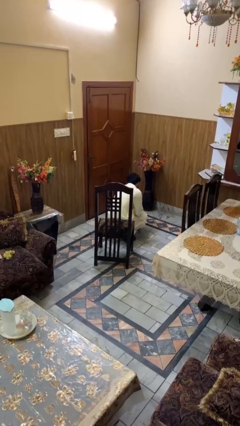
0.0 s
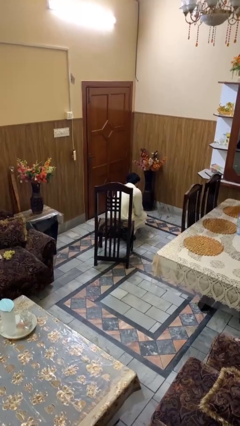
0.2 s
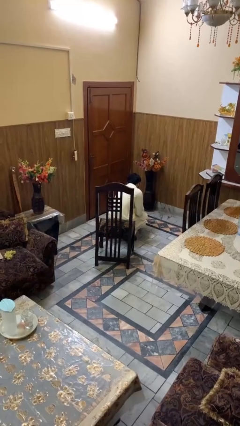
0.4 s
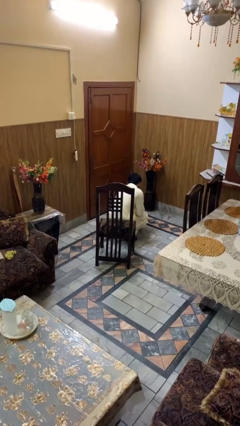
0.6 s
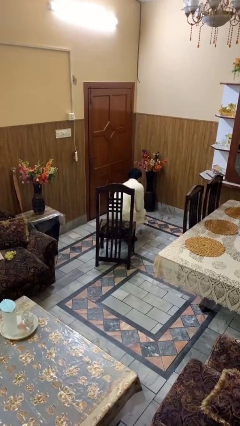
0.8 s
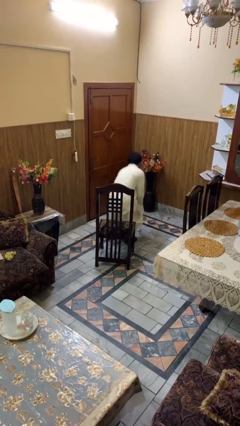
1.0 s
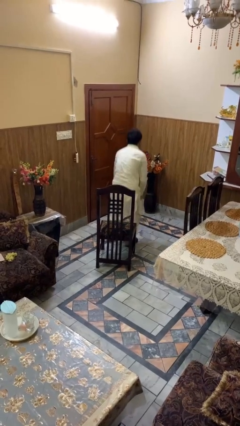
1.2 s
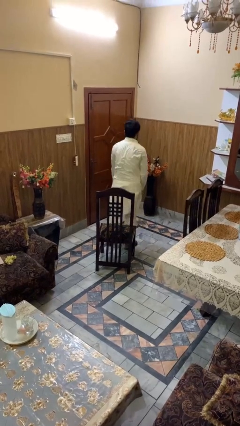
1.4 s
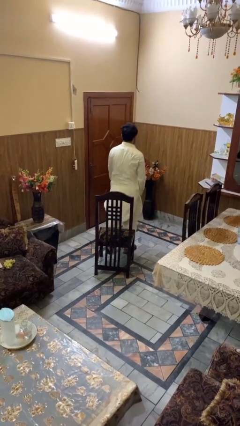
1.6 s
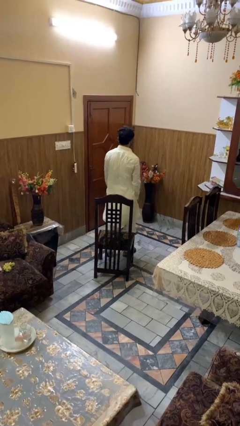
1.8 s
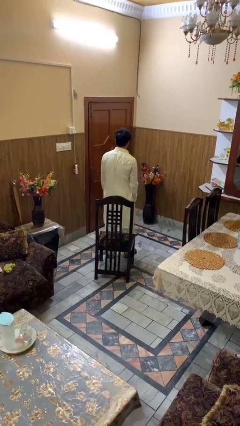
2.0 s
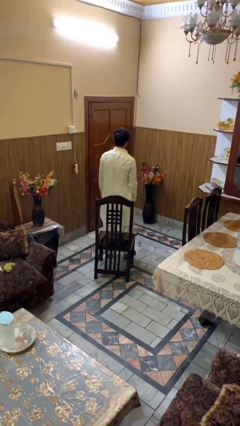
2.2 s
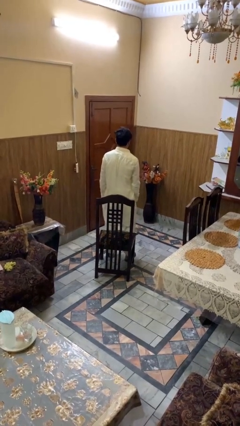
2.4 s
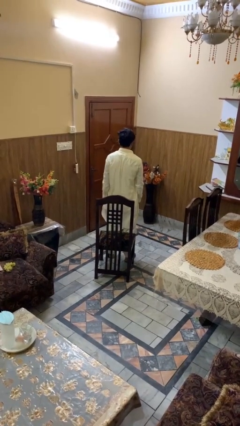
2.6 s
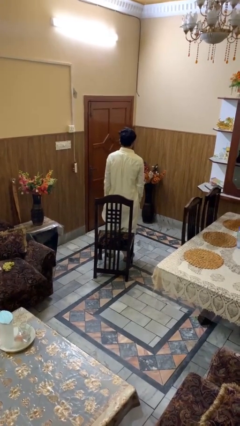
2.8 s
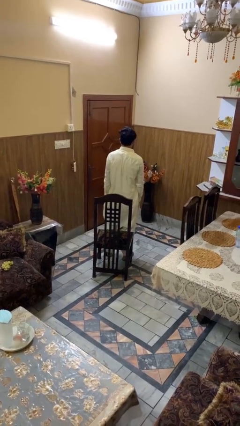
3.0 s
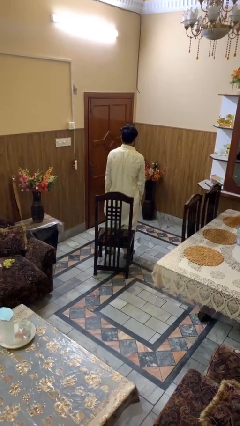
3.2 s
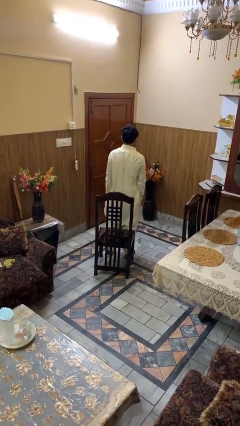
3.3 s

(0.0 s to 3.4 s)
person stands up from floor

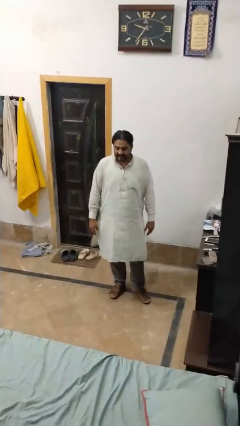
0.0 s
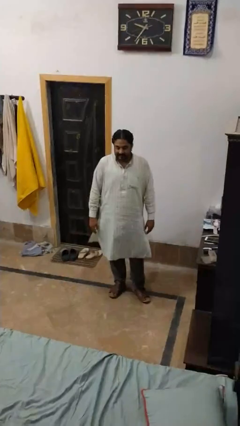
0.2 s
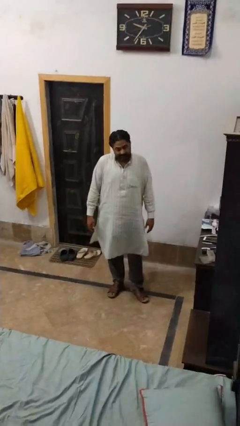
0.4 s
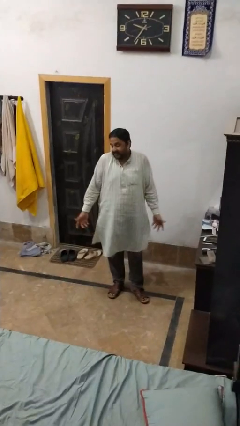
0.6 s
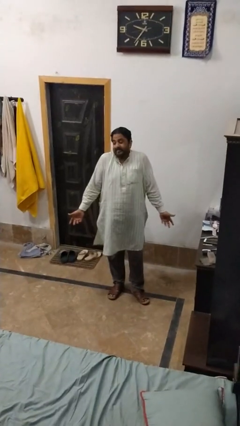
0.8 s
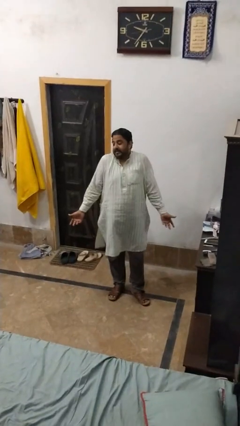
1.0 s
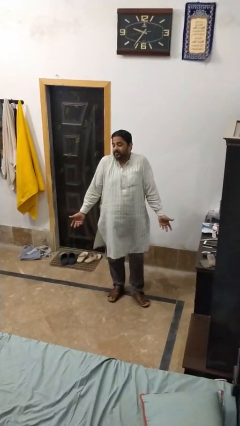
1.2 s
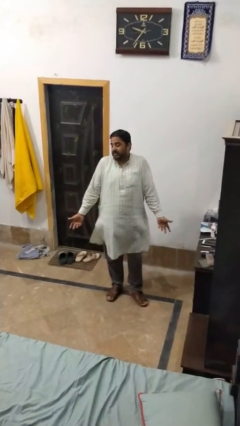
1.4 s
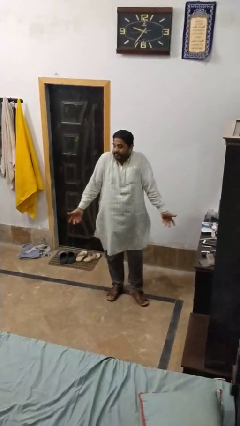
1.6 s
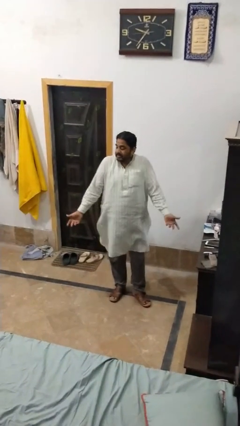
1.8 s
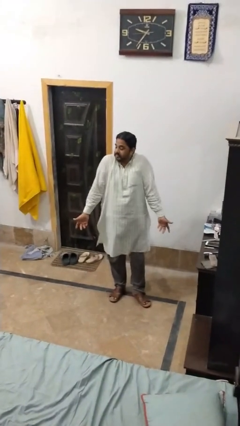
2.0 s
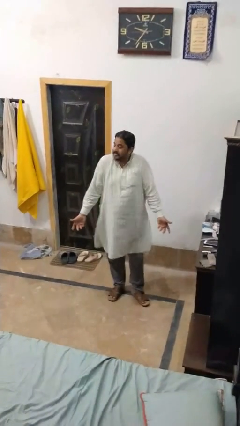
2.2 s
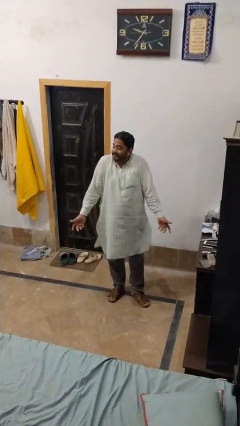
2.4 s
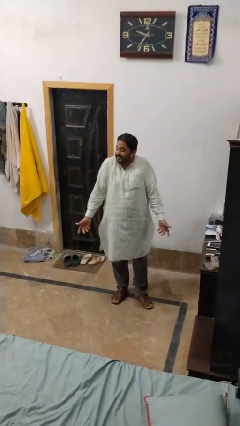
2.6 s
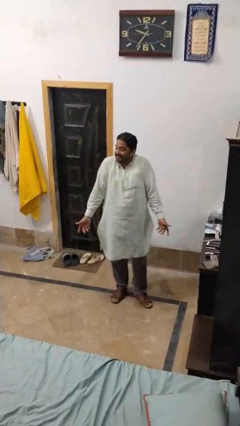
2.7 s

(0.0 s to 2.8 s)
person shrugs

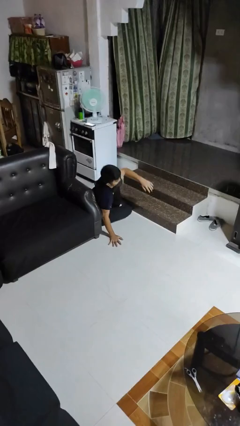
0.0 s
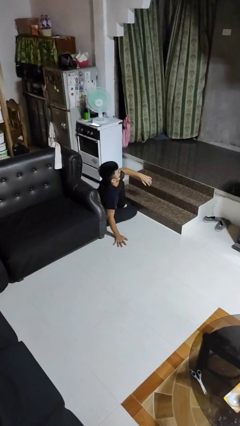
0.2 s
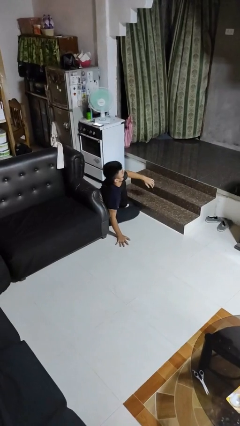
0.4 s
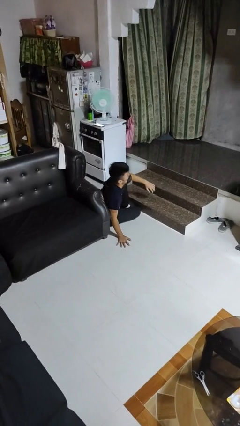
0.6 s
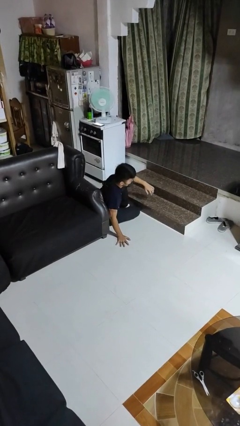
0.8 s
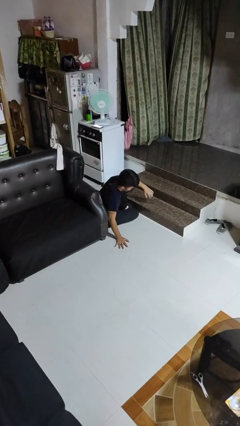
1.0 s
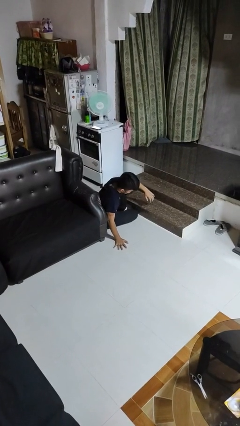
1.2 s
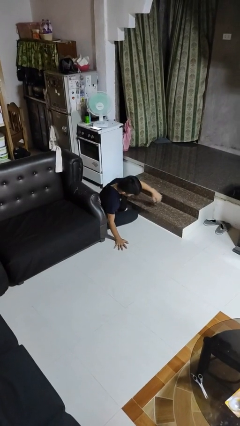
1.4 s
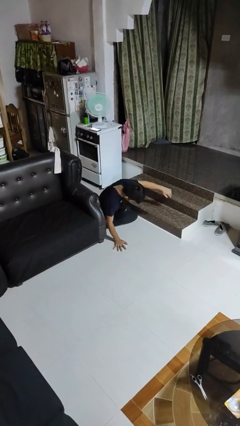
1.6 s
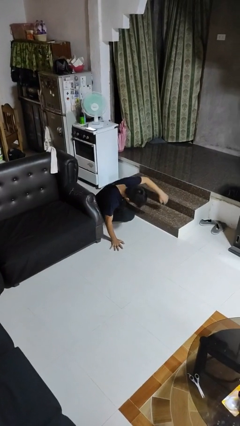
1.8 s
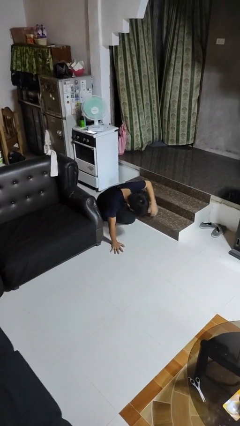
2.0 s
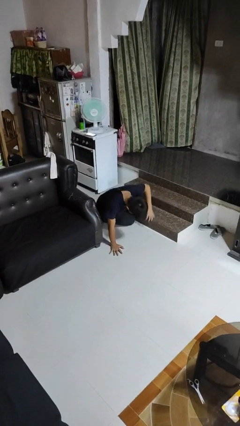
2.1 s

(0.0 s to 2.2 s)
person lies down on floor

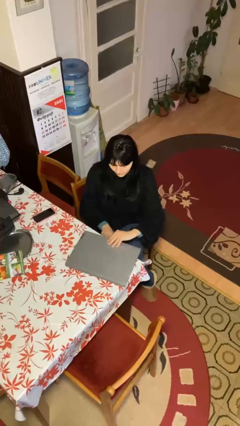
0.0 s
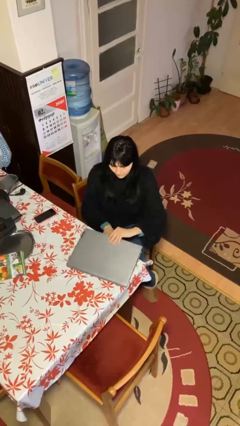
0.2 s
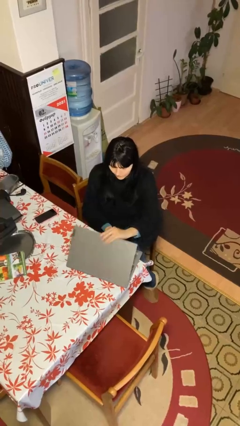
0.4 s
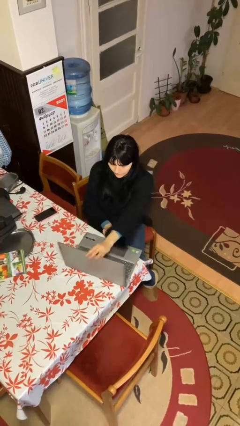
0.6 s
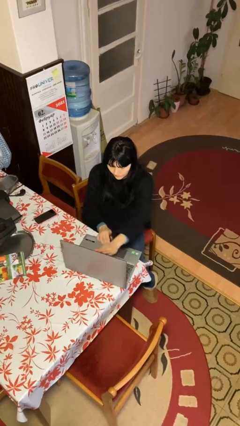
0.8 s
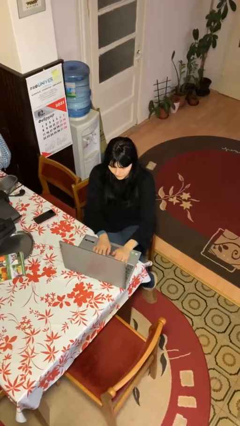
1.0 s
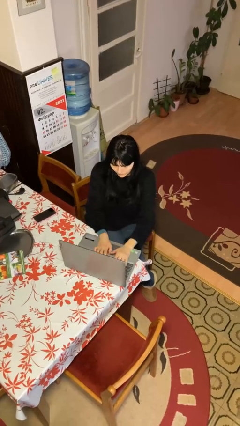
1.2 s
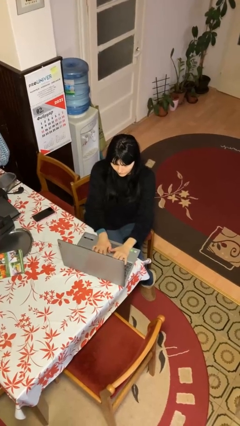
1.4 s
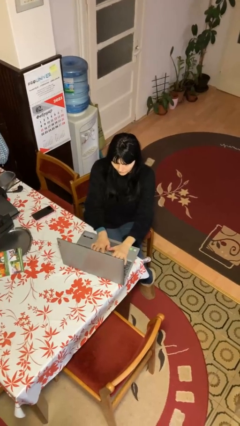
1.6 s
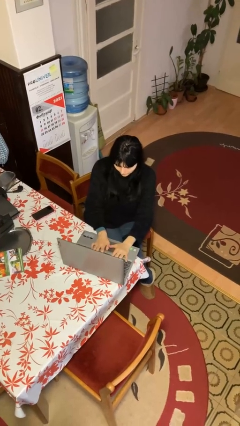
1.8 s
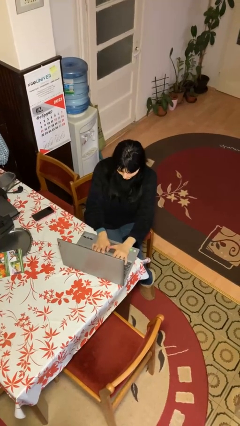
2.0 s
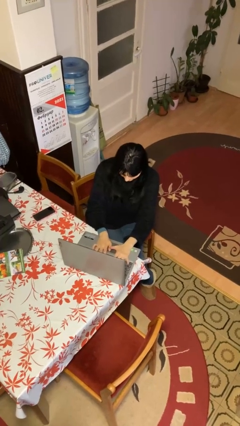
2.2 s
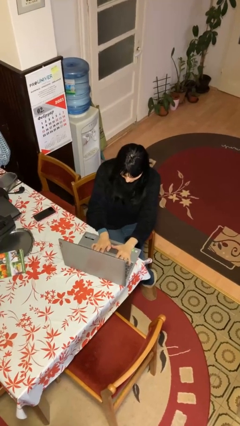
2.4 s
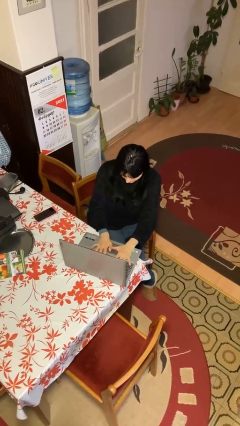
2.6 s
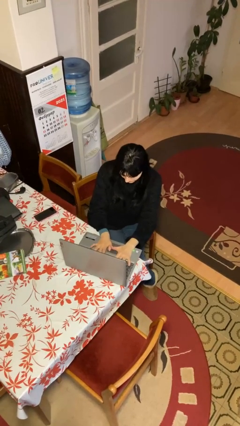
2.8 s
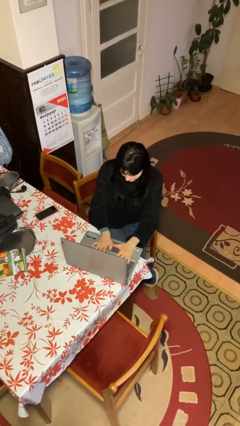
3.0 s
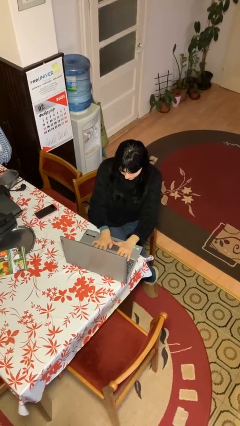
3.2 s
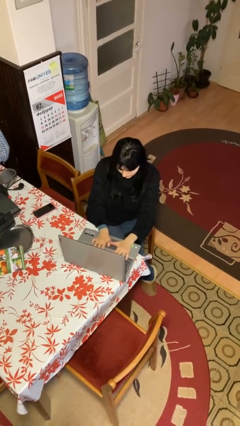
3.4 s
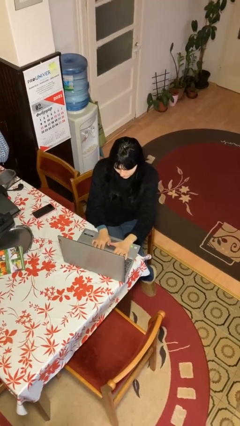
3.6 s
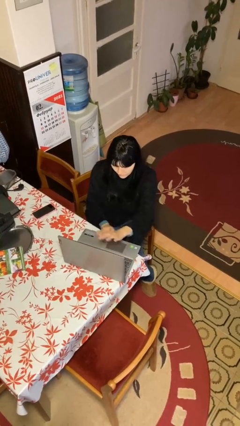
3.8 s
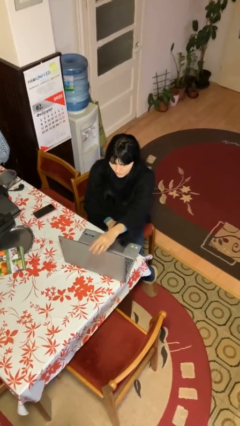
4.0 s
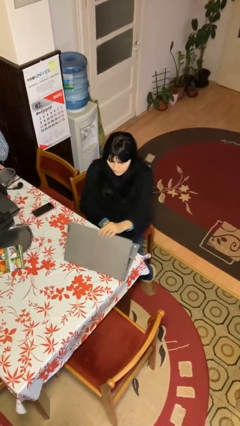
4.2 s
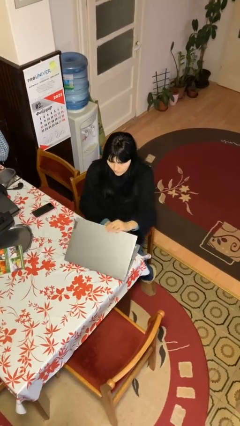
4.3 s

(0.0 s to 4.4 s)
person interacts with laptop

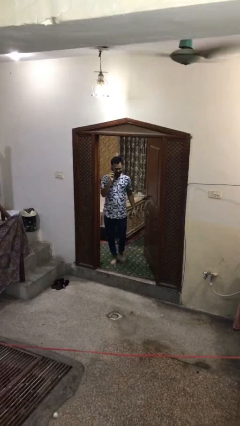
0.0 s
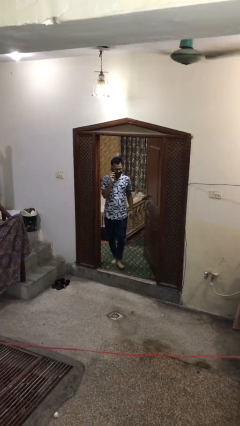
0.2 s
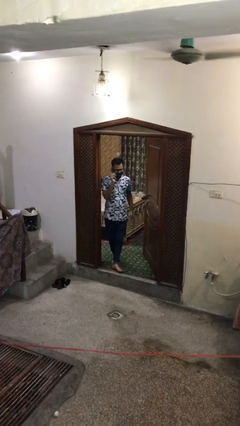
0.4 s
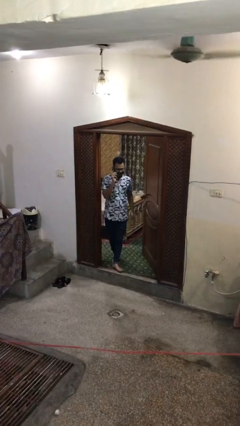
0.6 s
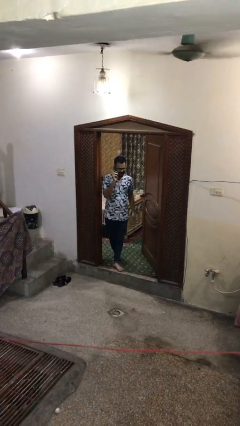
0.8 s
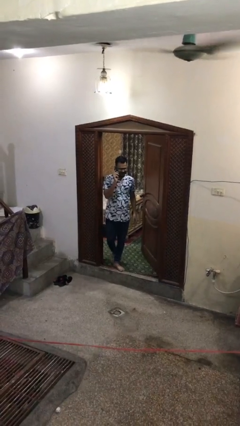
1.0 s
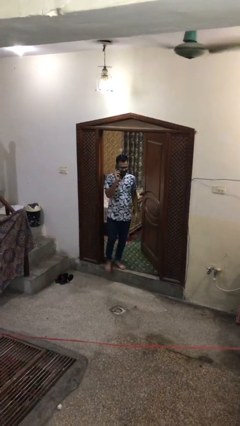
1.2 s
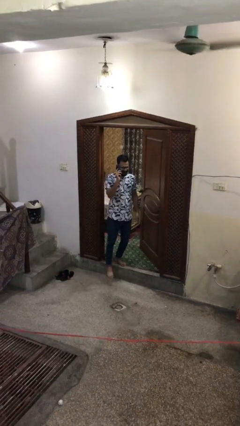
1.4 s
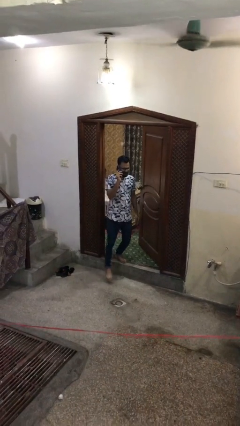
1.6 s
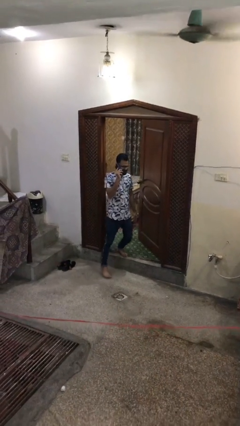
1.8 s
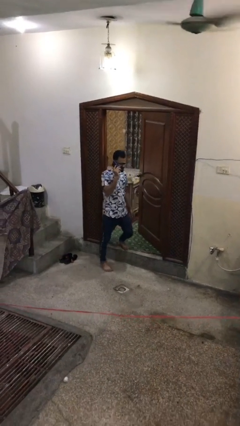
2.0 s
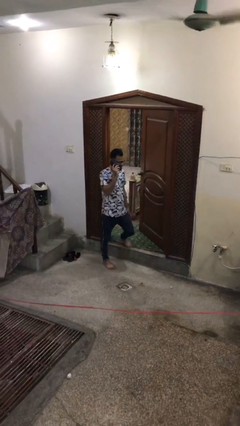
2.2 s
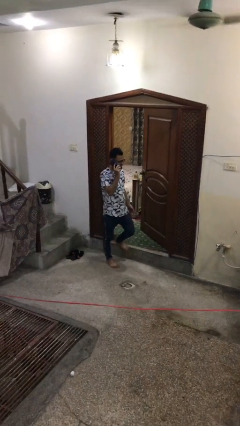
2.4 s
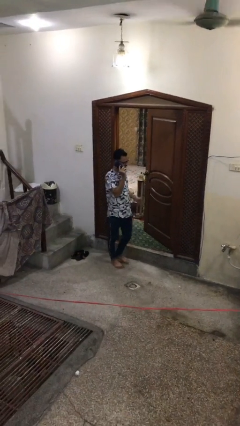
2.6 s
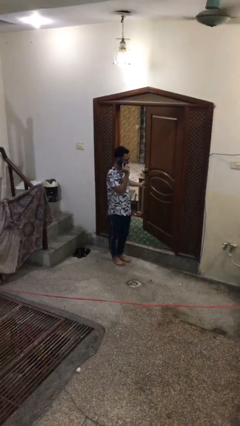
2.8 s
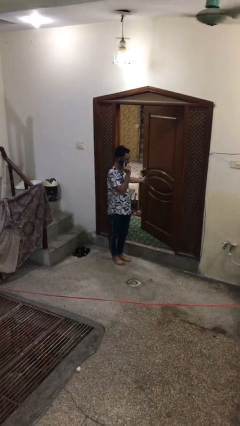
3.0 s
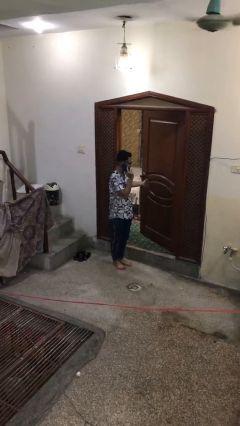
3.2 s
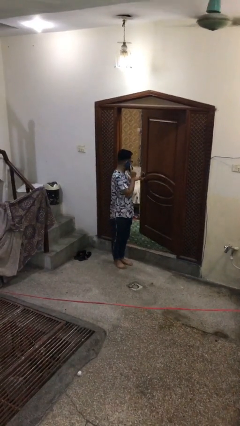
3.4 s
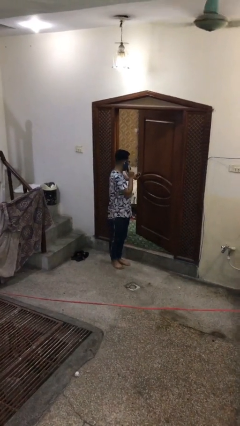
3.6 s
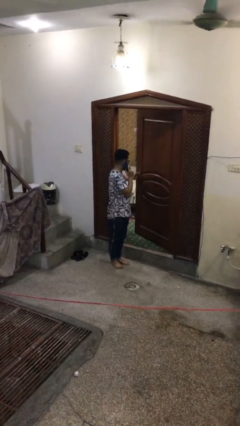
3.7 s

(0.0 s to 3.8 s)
person enters scene through structure

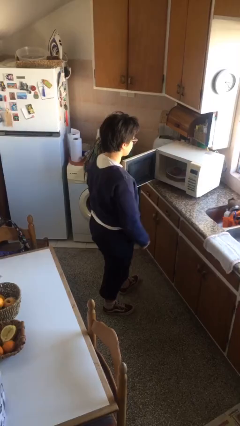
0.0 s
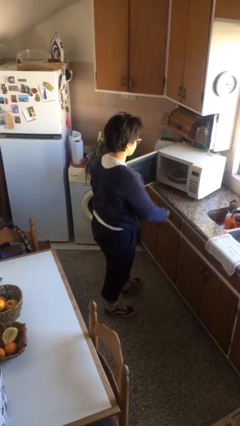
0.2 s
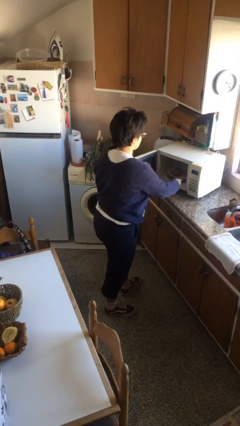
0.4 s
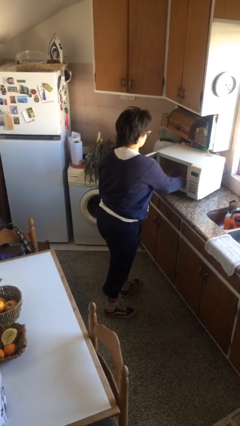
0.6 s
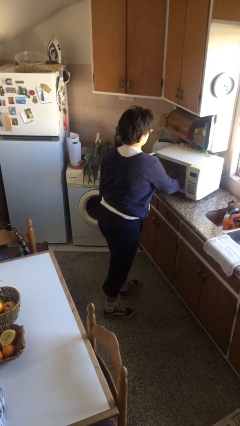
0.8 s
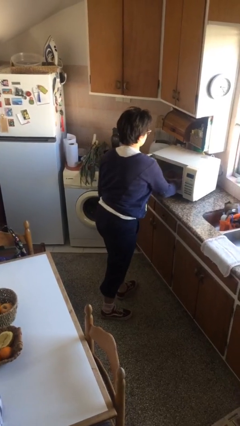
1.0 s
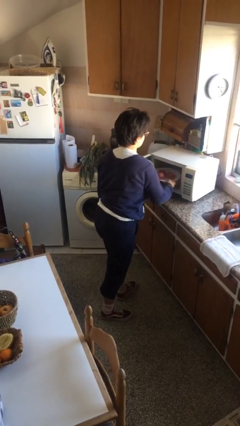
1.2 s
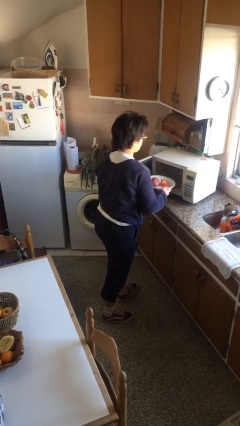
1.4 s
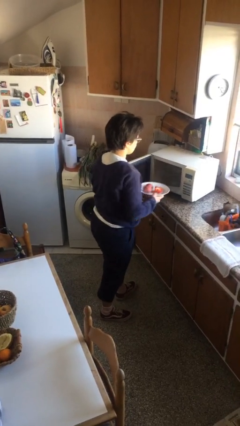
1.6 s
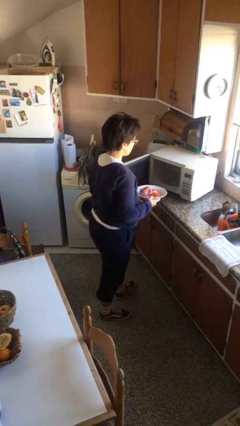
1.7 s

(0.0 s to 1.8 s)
person takes object from microwave
